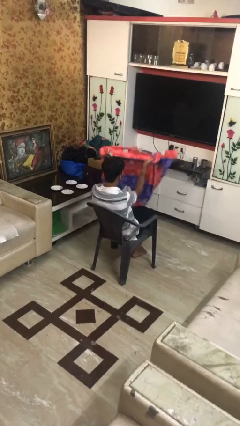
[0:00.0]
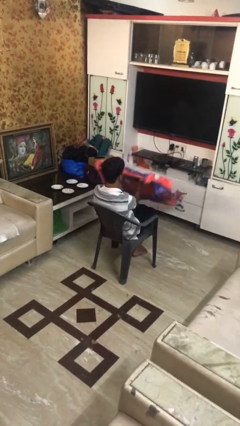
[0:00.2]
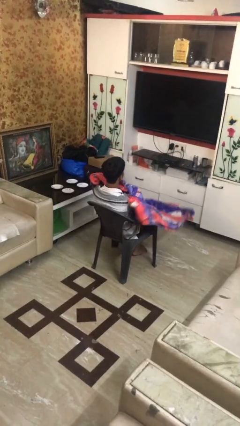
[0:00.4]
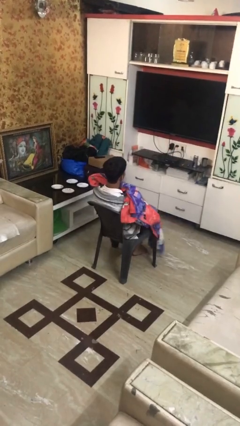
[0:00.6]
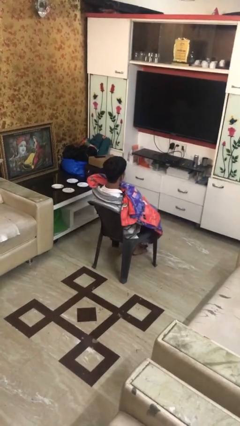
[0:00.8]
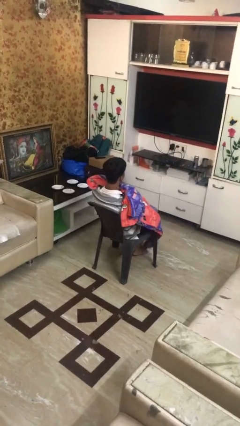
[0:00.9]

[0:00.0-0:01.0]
person covers with blanket

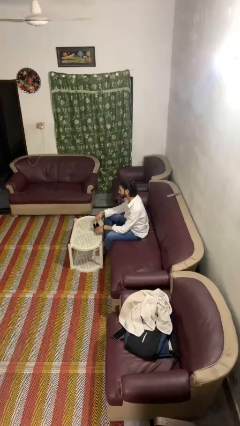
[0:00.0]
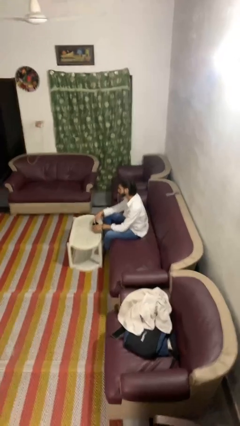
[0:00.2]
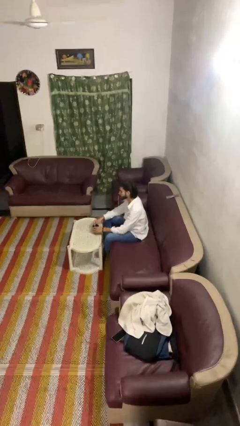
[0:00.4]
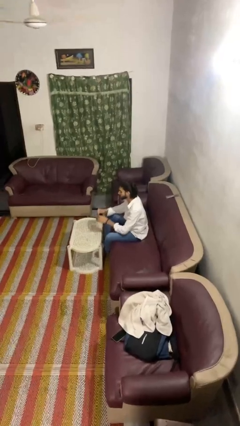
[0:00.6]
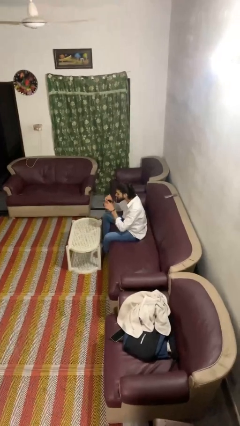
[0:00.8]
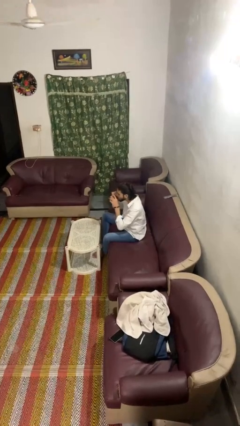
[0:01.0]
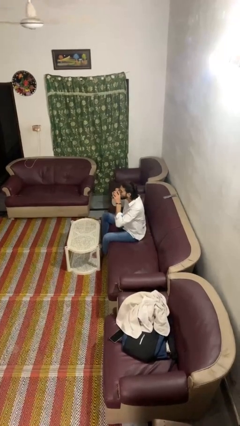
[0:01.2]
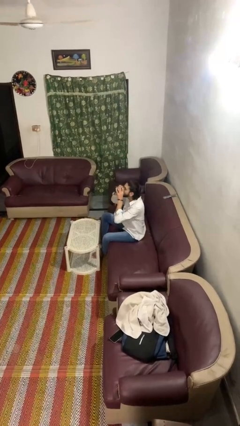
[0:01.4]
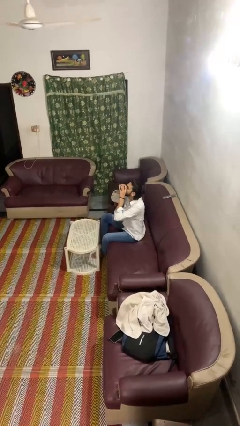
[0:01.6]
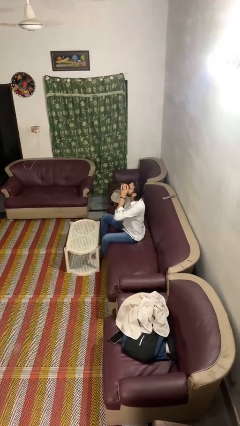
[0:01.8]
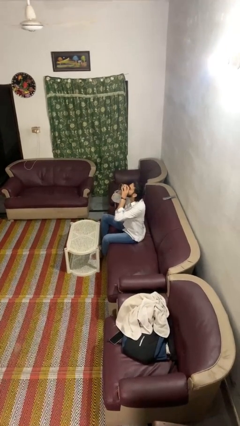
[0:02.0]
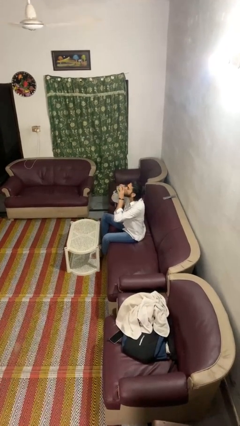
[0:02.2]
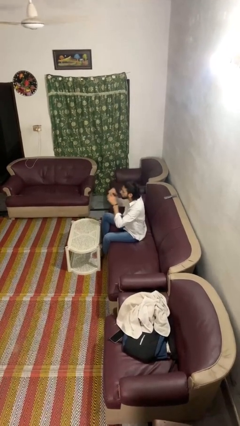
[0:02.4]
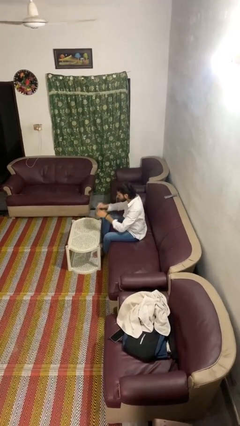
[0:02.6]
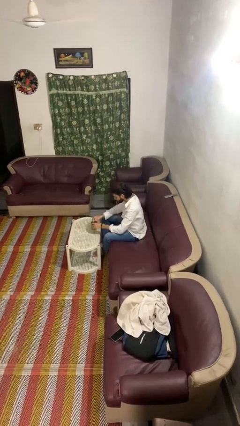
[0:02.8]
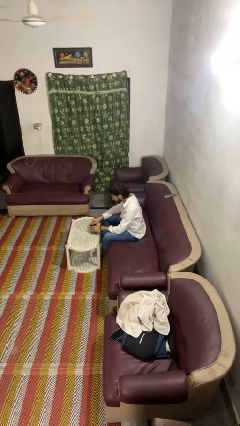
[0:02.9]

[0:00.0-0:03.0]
person drinks from mug

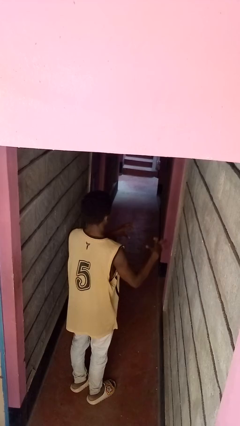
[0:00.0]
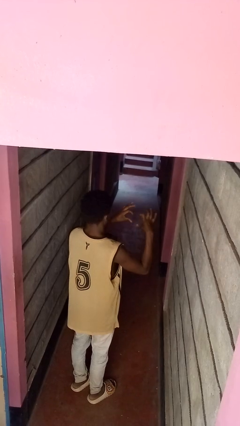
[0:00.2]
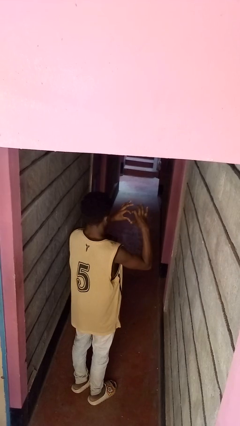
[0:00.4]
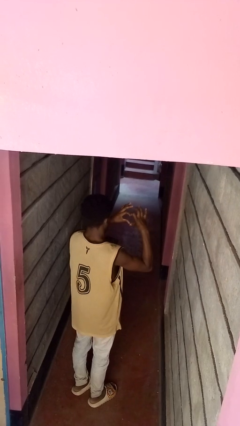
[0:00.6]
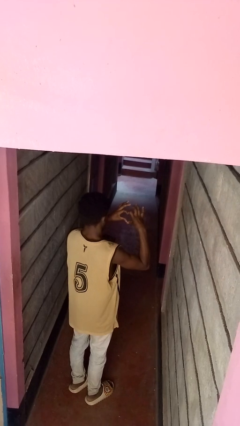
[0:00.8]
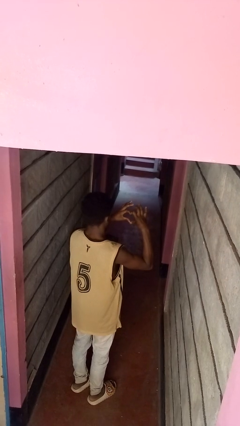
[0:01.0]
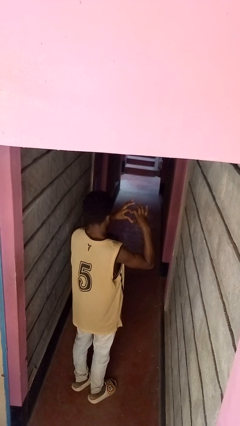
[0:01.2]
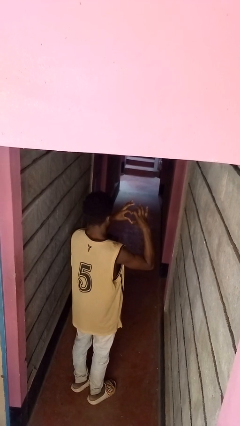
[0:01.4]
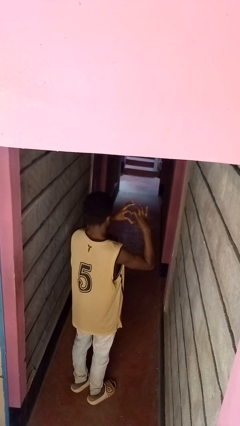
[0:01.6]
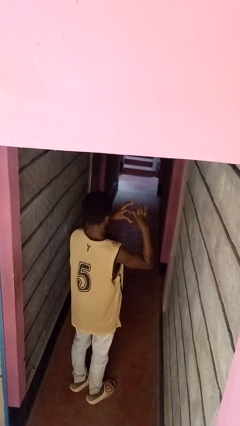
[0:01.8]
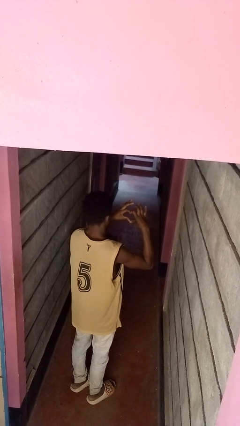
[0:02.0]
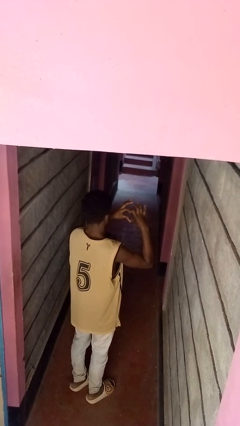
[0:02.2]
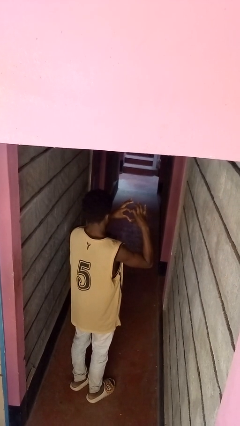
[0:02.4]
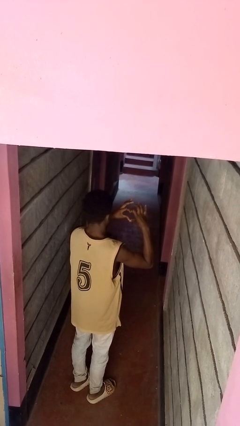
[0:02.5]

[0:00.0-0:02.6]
person gestures heart

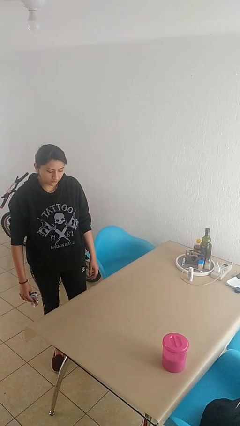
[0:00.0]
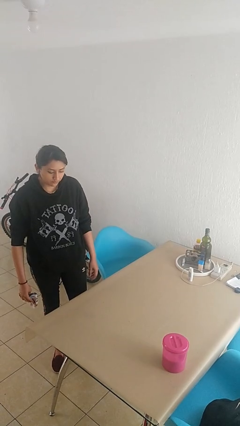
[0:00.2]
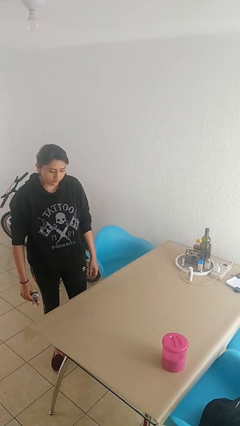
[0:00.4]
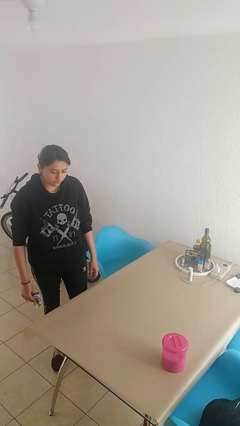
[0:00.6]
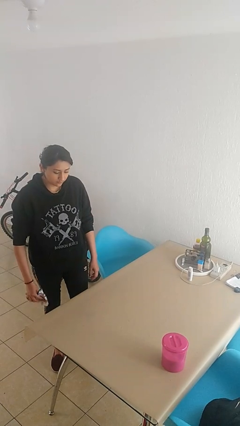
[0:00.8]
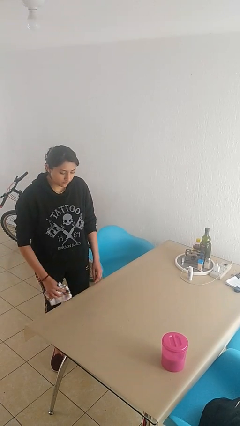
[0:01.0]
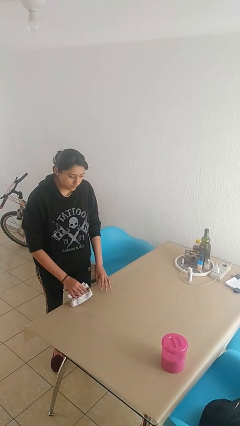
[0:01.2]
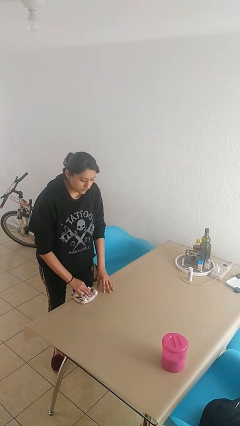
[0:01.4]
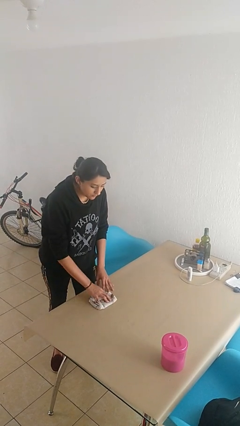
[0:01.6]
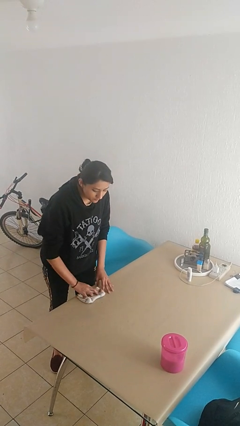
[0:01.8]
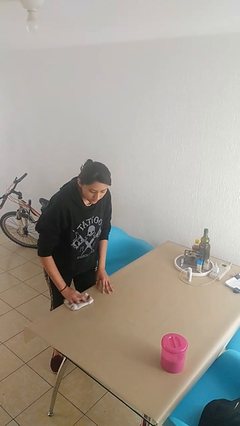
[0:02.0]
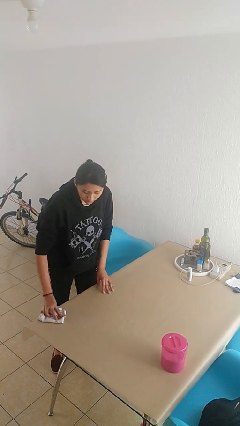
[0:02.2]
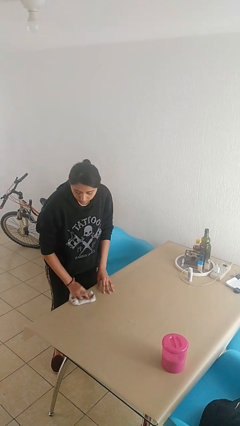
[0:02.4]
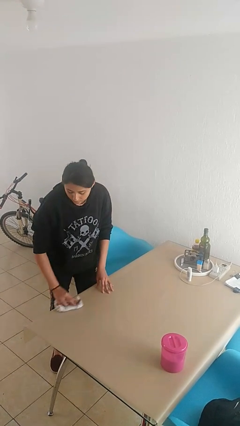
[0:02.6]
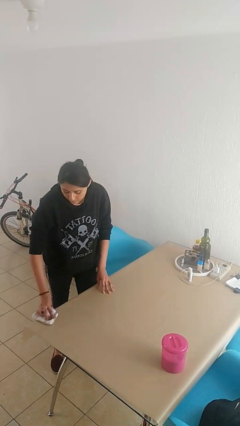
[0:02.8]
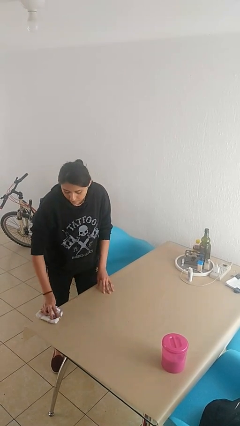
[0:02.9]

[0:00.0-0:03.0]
person cleans table with rag

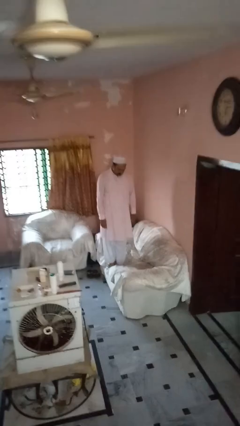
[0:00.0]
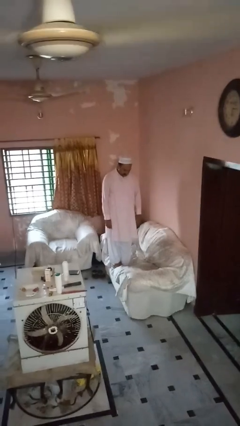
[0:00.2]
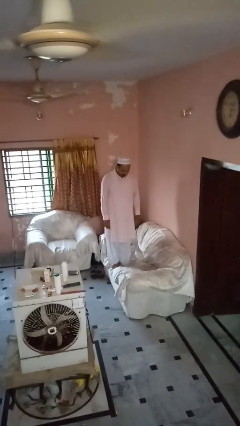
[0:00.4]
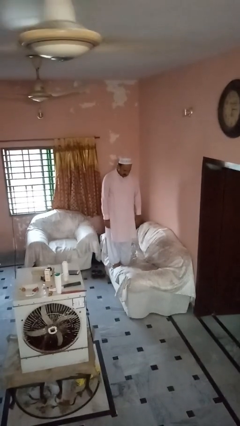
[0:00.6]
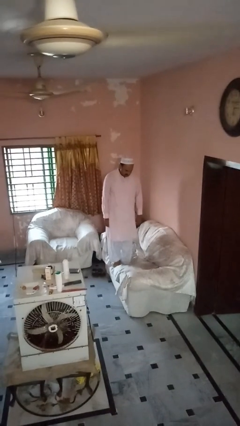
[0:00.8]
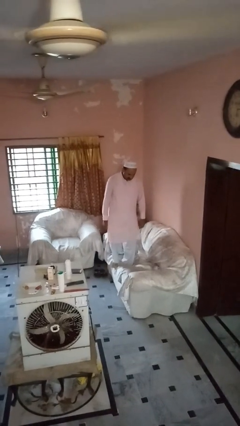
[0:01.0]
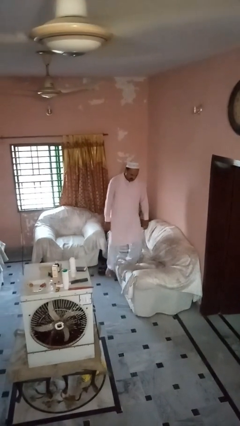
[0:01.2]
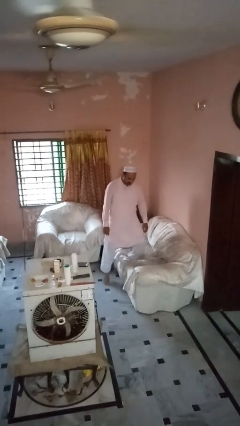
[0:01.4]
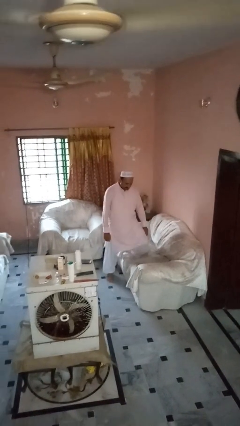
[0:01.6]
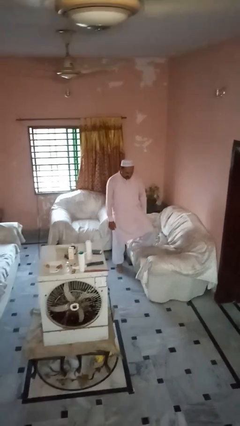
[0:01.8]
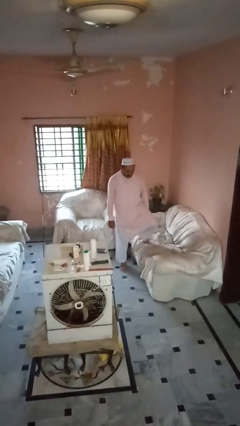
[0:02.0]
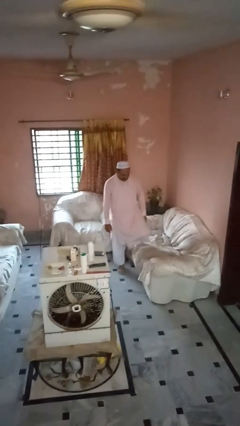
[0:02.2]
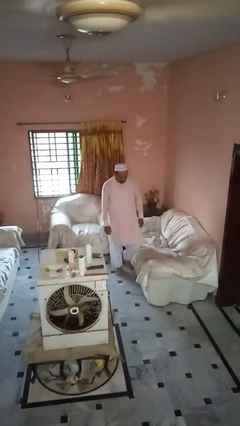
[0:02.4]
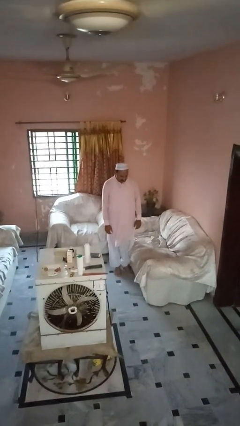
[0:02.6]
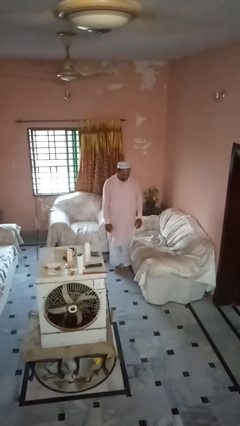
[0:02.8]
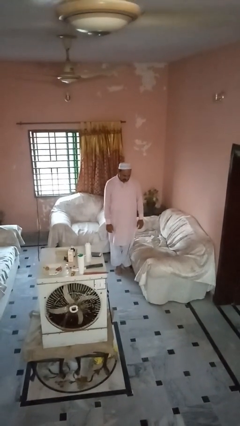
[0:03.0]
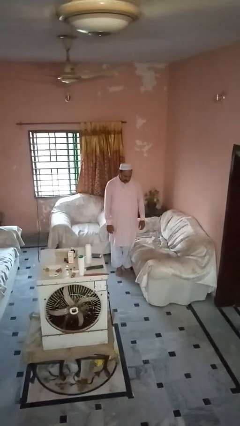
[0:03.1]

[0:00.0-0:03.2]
person climbs off couch

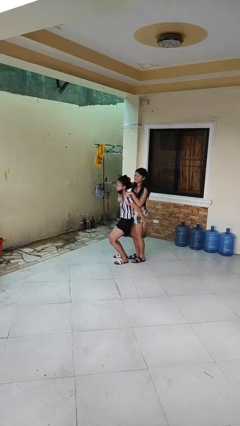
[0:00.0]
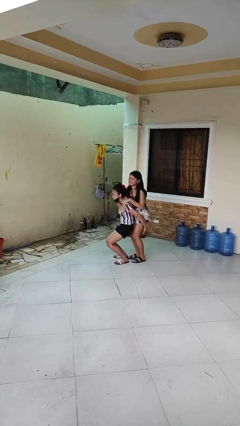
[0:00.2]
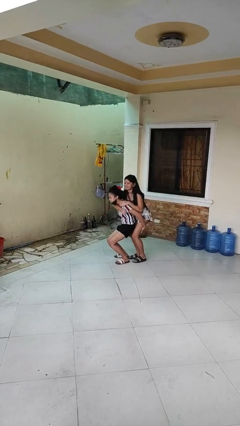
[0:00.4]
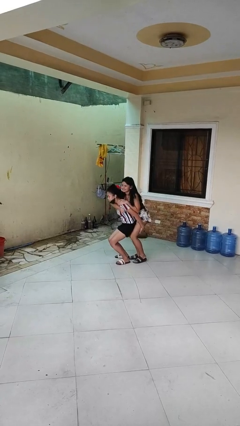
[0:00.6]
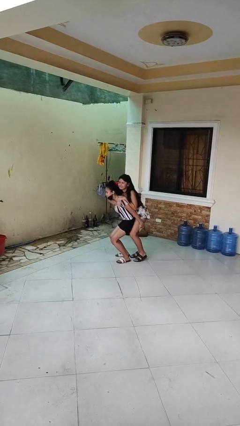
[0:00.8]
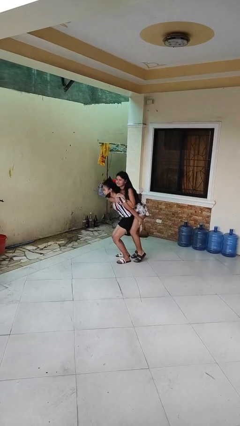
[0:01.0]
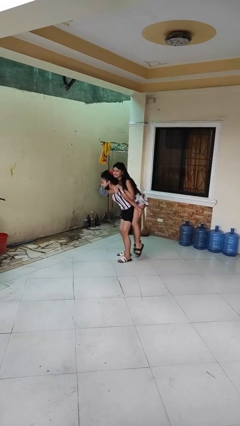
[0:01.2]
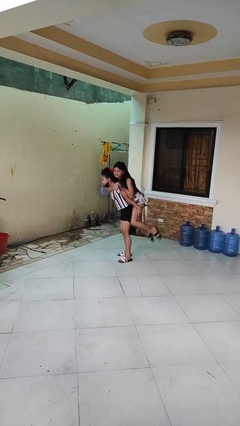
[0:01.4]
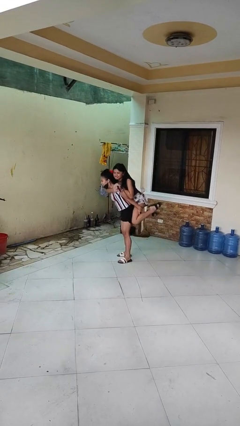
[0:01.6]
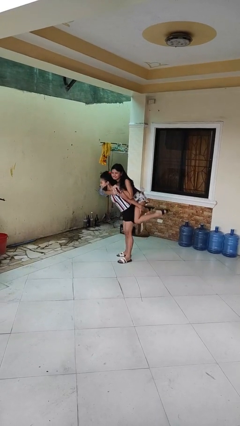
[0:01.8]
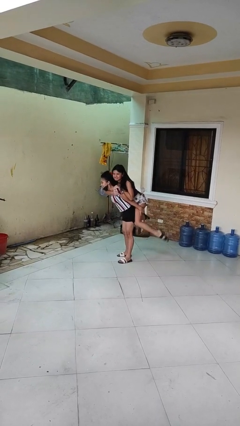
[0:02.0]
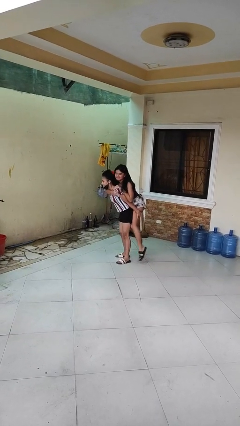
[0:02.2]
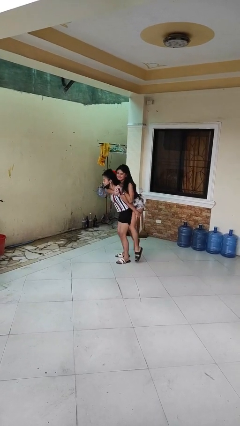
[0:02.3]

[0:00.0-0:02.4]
person carries person over shoulder

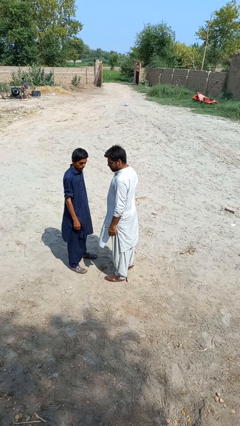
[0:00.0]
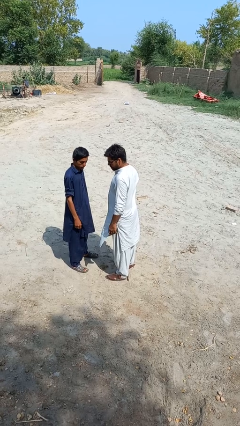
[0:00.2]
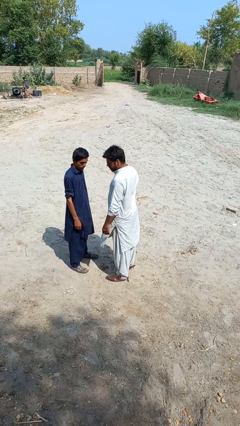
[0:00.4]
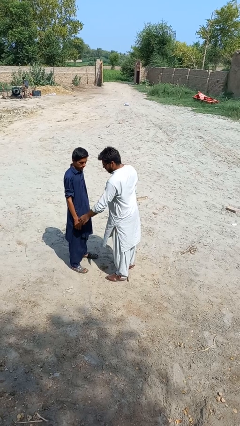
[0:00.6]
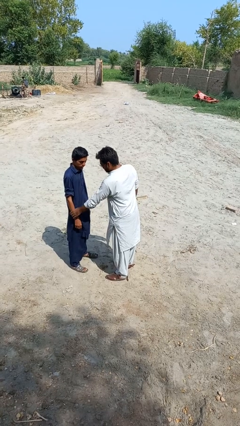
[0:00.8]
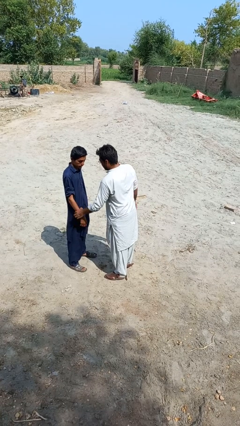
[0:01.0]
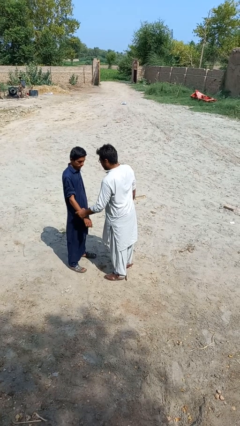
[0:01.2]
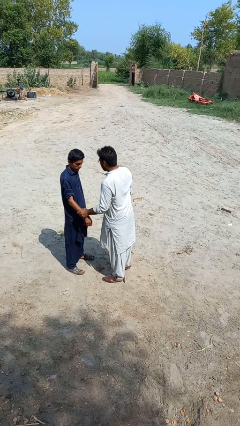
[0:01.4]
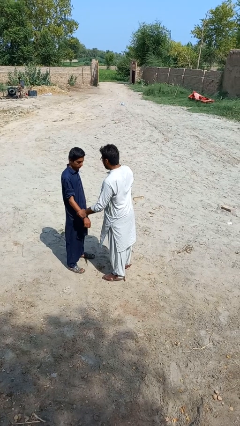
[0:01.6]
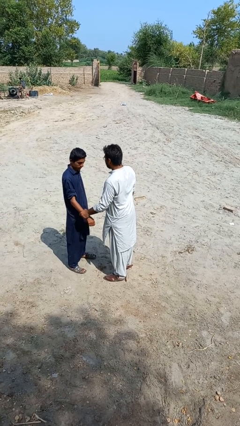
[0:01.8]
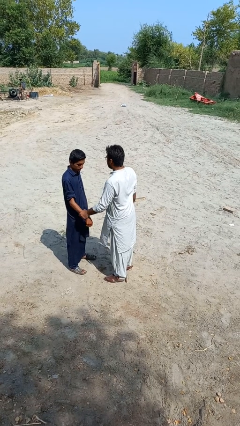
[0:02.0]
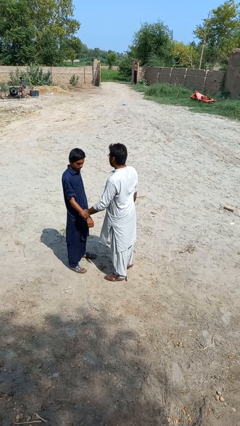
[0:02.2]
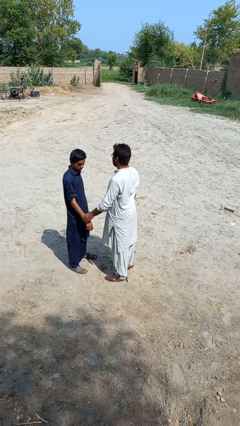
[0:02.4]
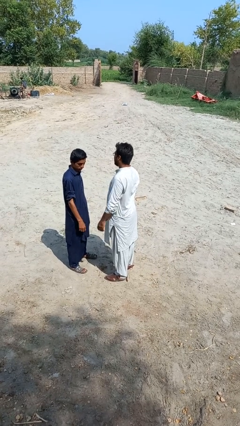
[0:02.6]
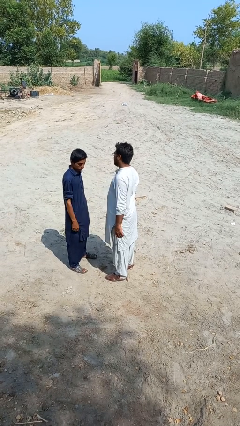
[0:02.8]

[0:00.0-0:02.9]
person grabs person by forearm
